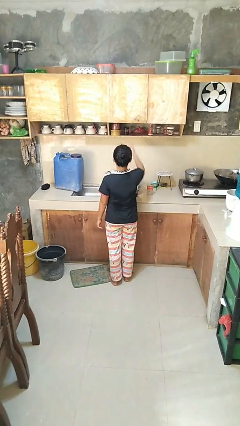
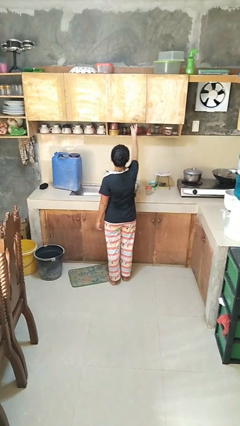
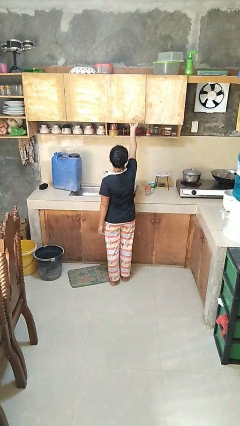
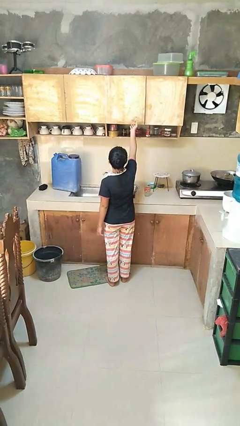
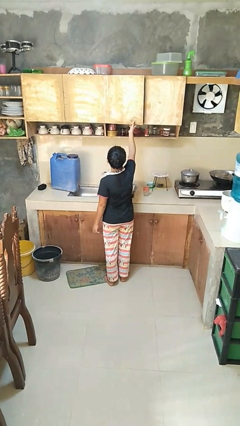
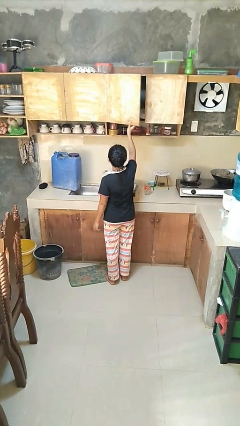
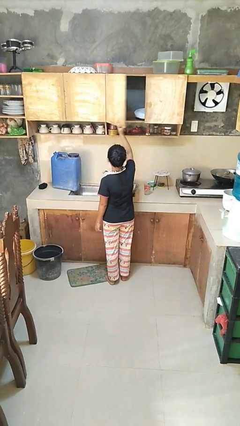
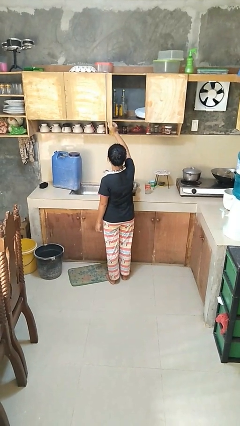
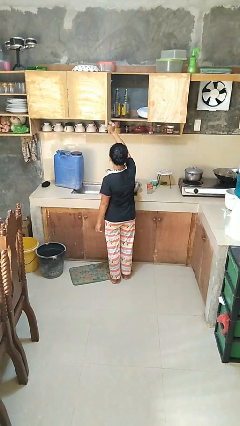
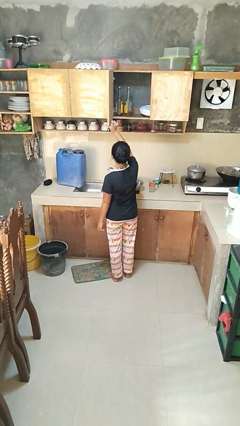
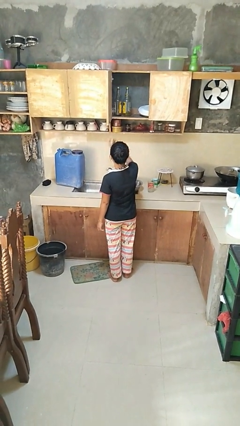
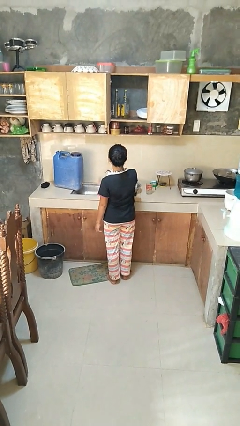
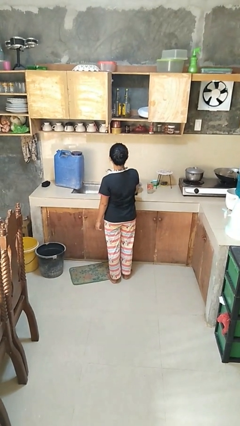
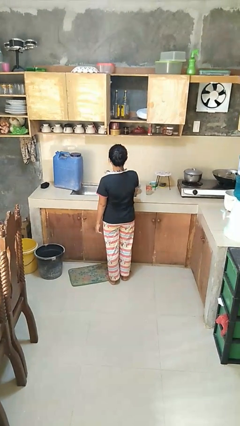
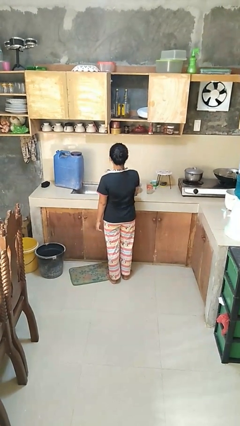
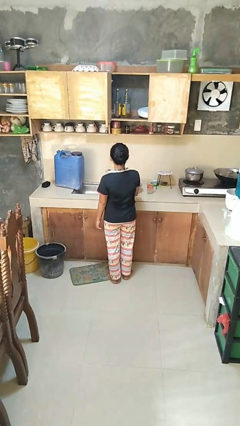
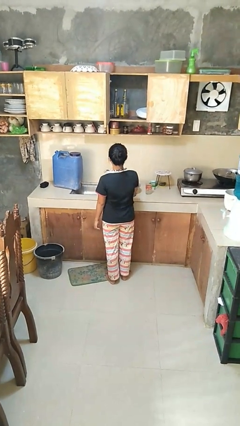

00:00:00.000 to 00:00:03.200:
person opens cabinet

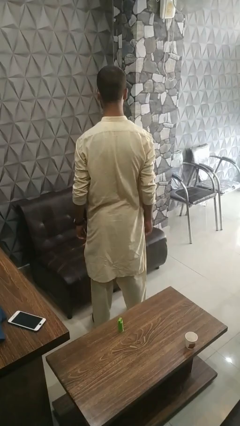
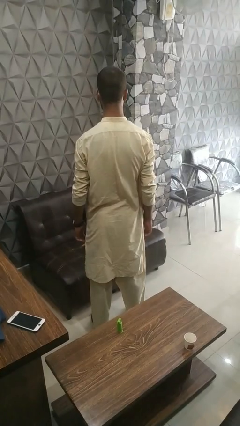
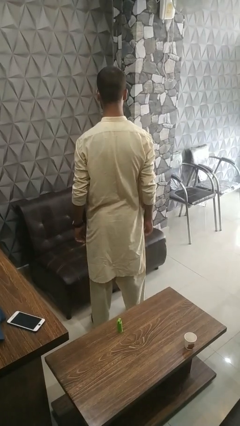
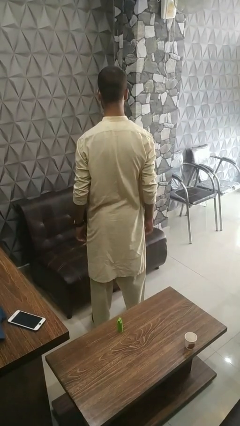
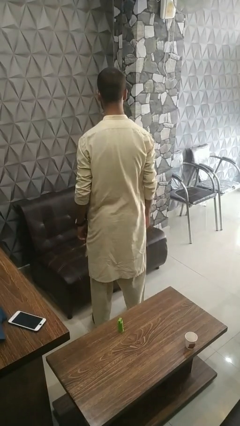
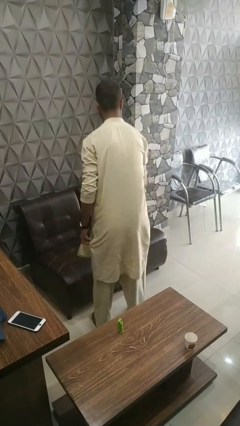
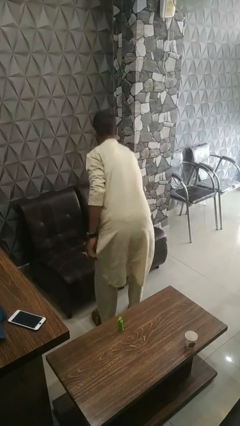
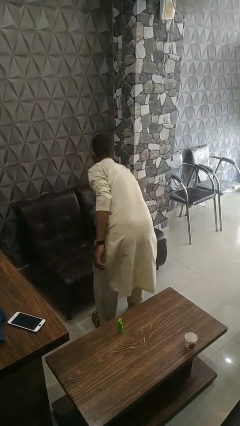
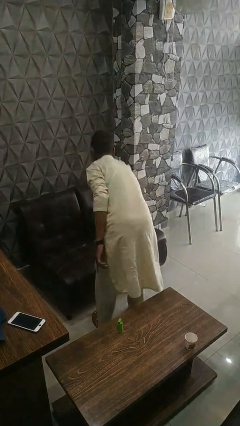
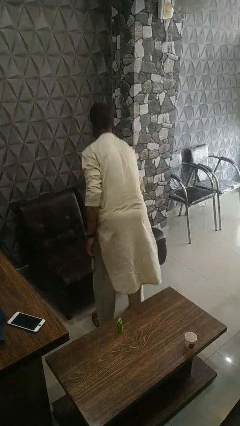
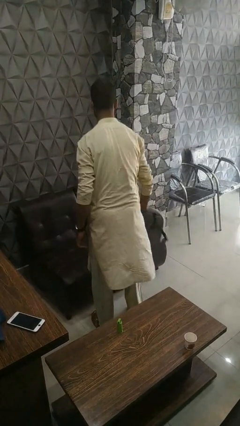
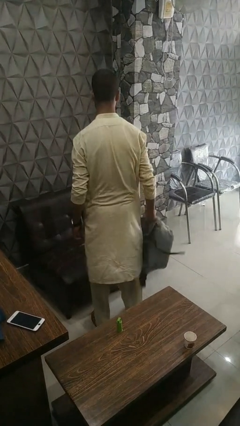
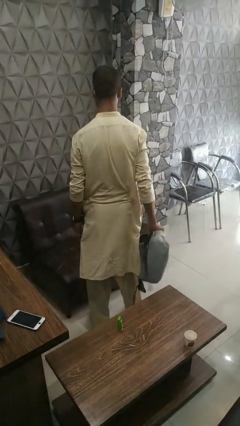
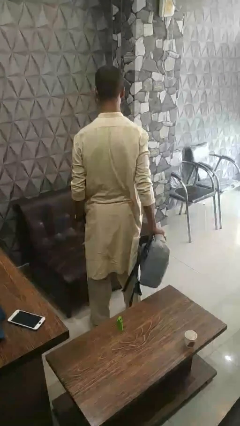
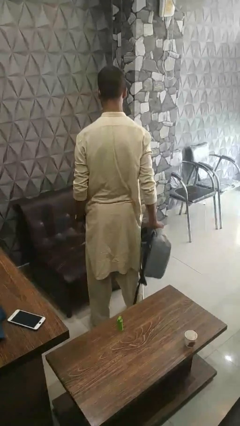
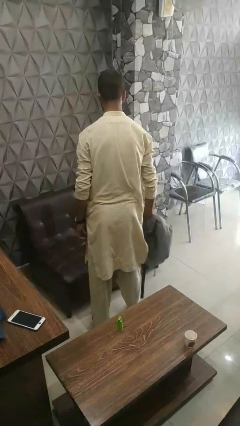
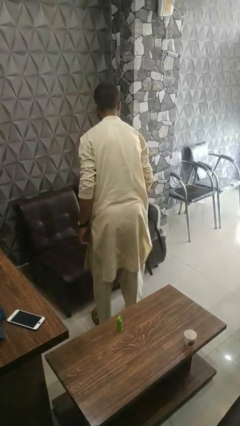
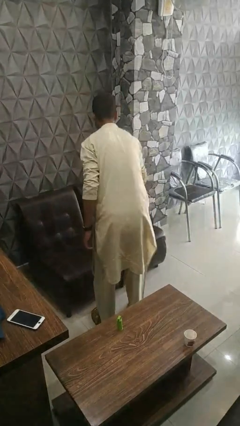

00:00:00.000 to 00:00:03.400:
person searches in couch

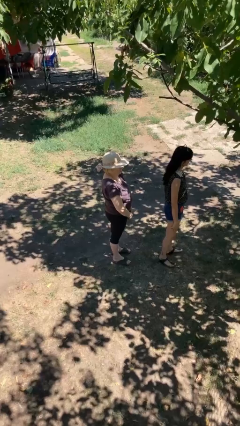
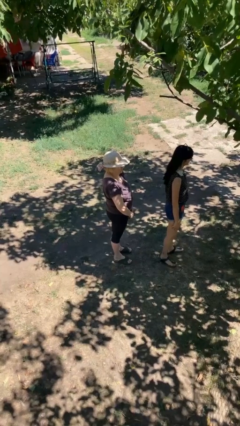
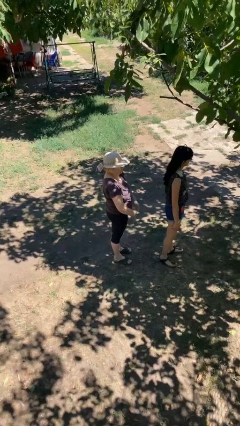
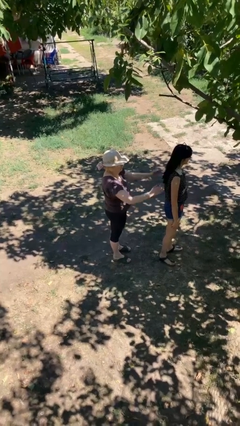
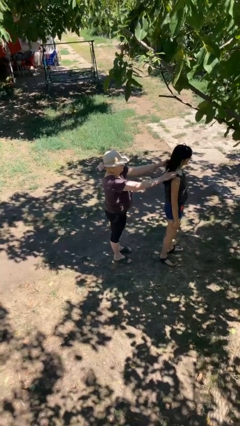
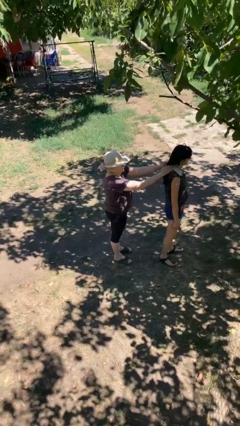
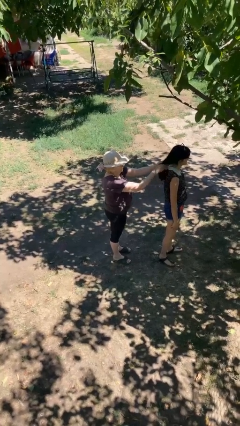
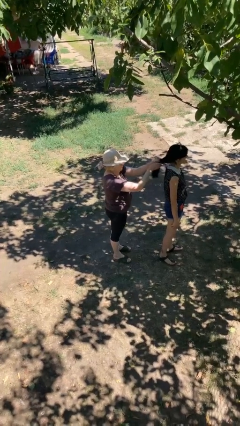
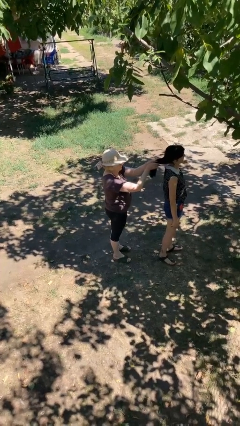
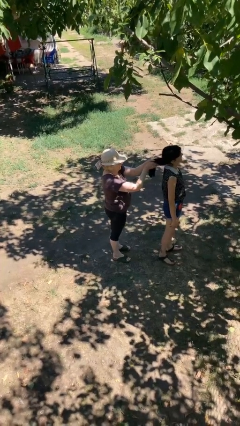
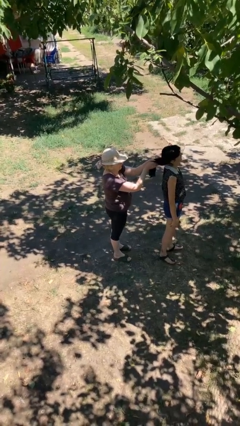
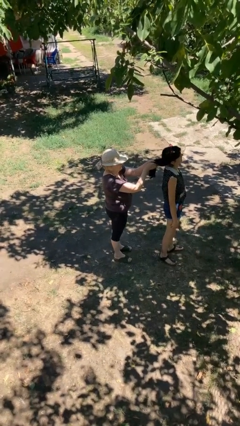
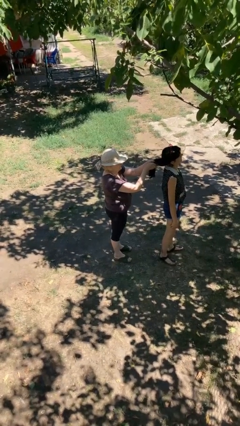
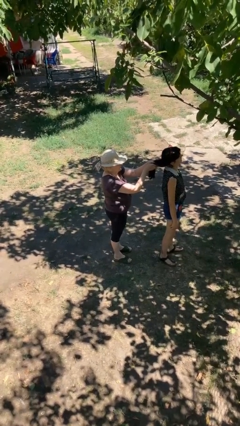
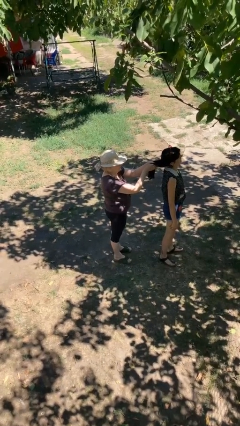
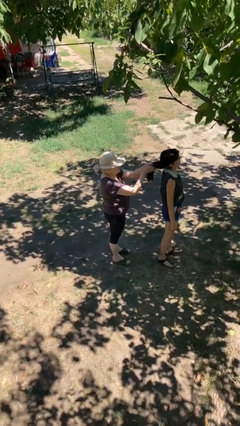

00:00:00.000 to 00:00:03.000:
person grabs person by hair

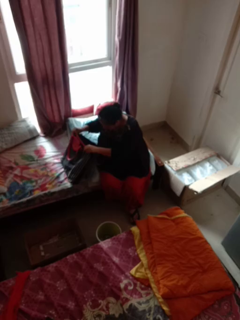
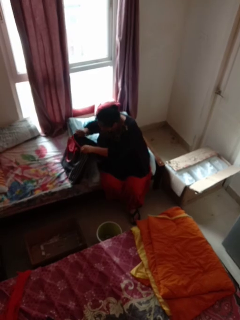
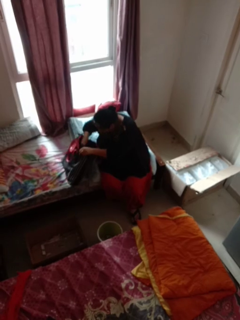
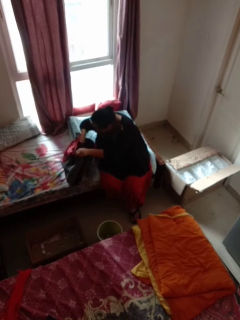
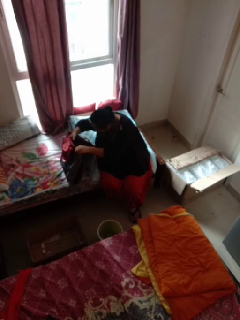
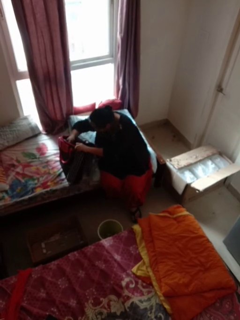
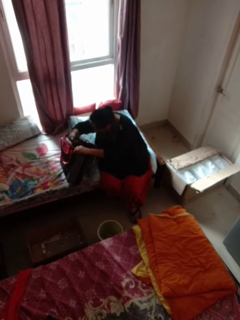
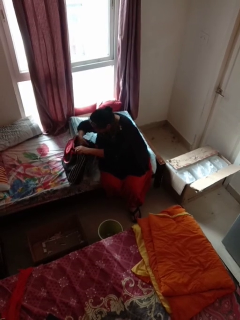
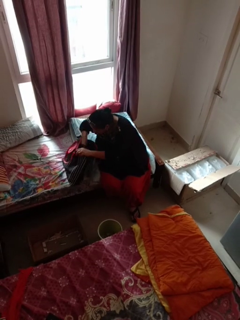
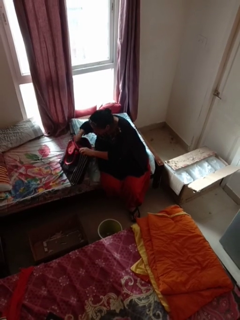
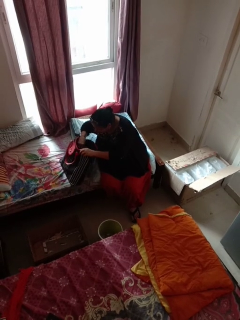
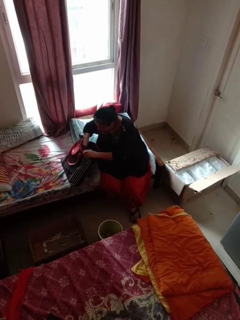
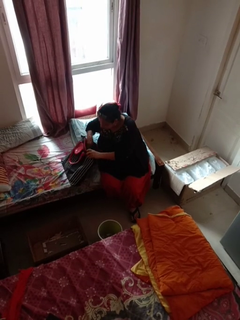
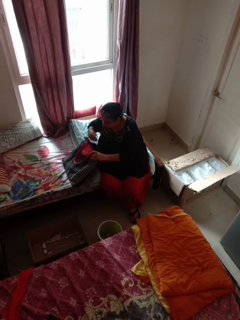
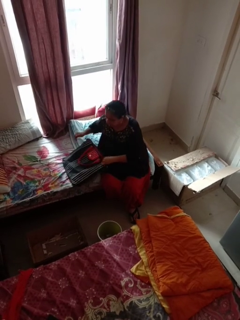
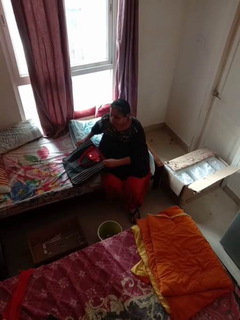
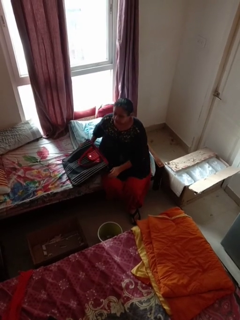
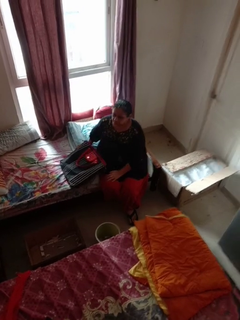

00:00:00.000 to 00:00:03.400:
person searches in bag

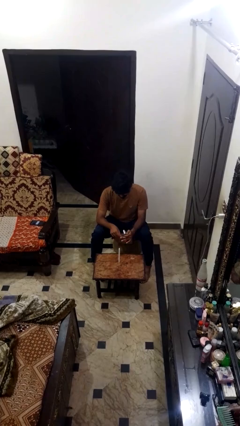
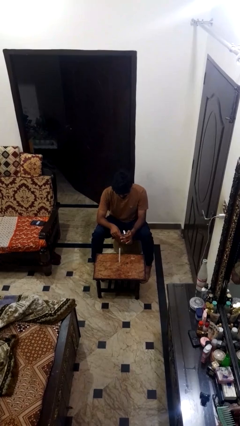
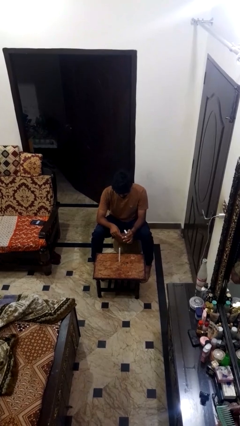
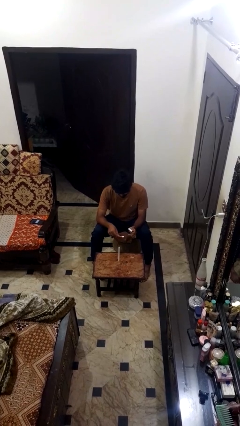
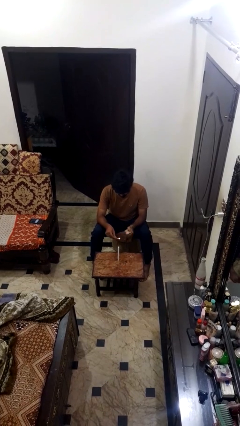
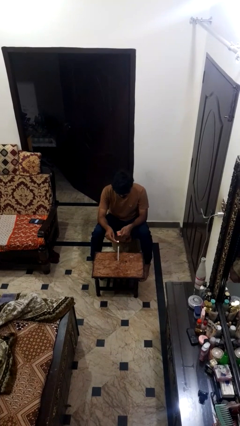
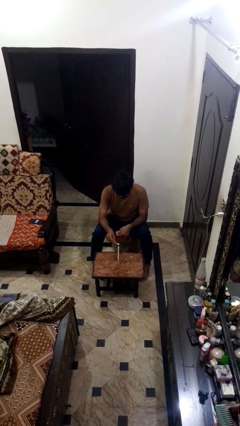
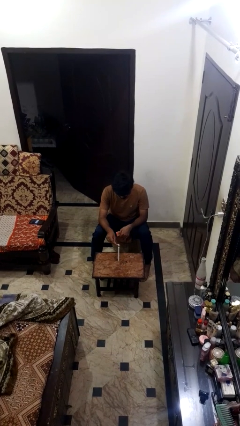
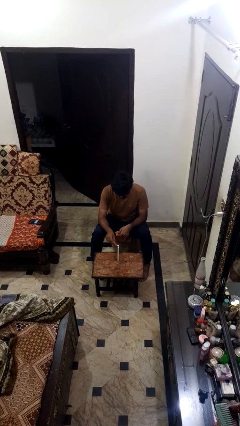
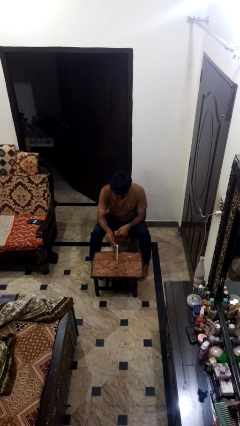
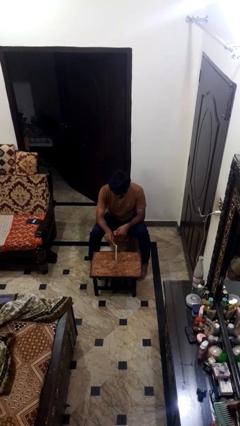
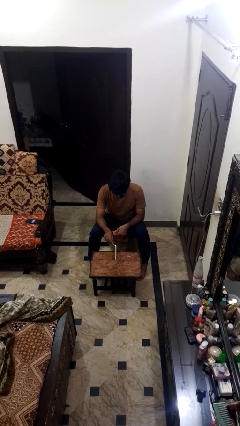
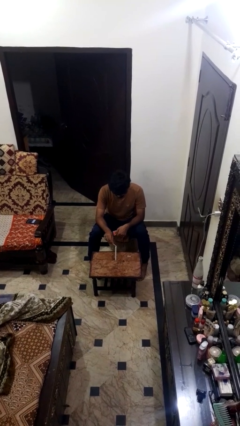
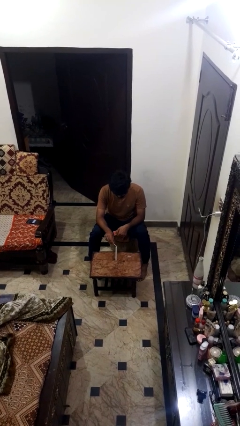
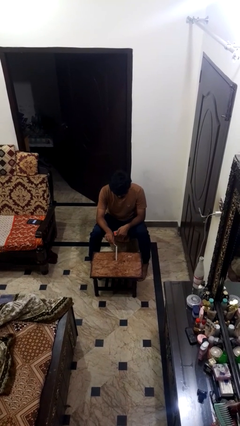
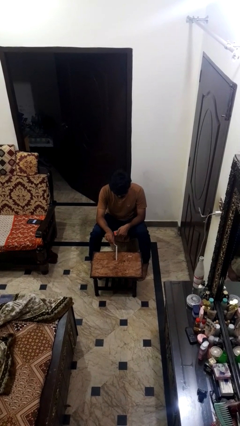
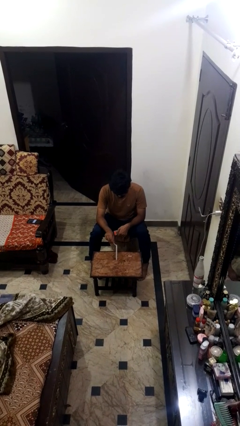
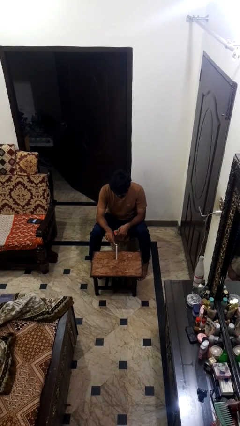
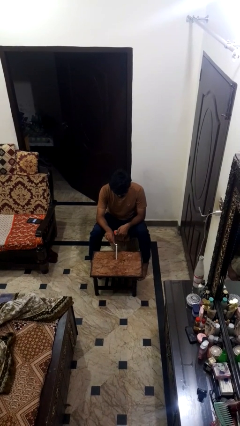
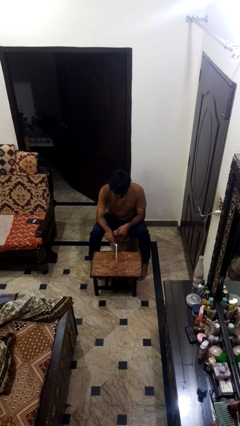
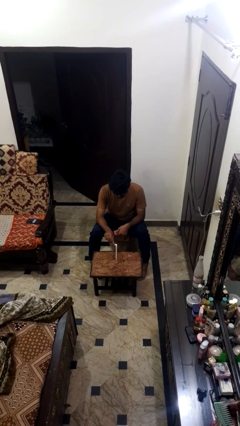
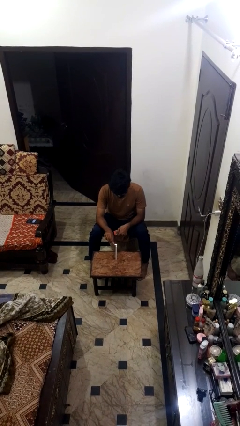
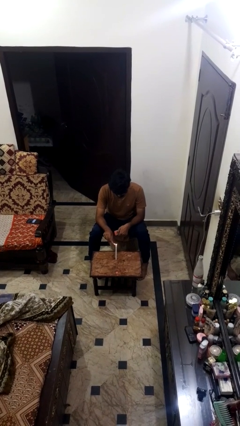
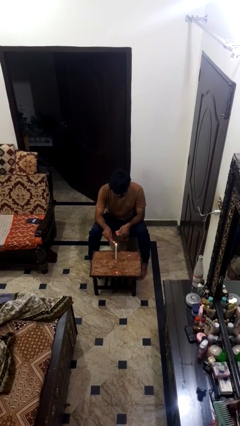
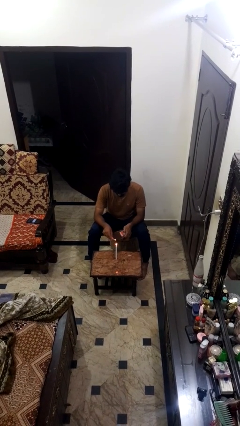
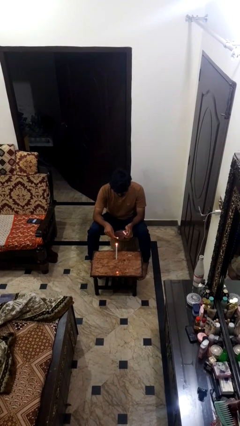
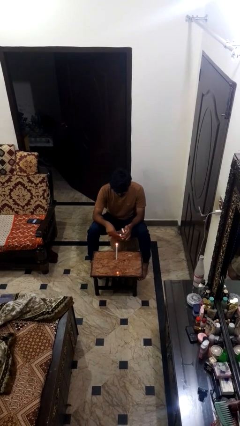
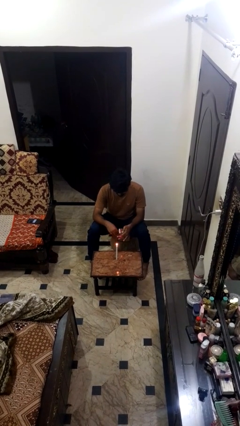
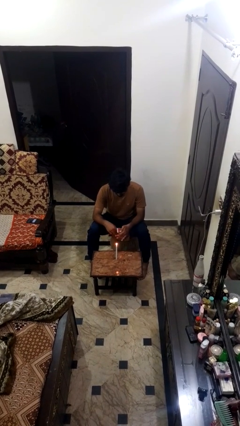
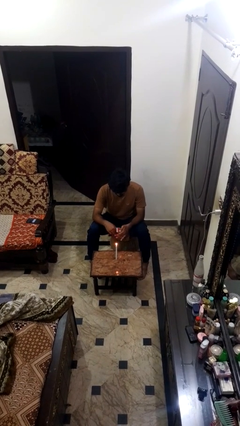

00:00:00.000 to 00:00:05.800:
person lights candle
